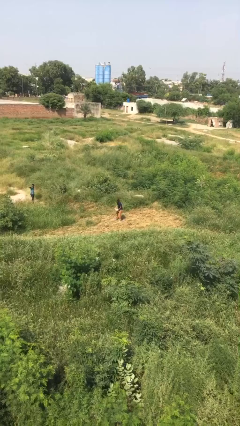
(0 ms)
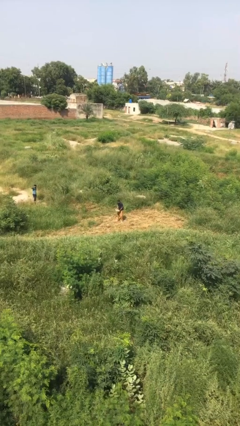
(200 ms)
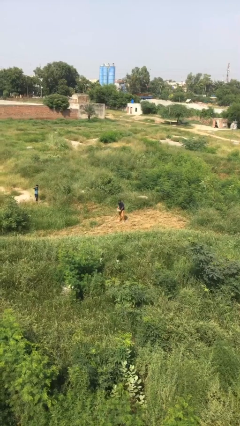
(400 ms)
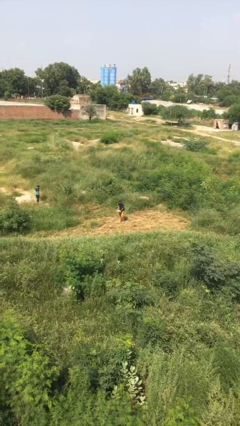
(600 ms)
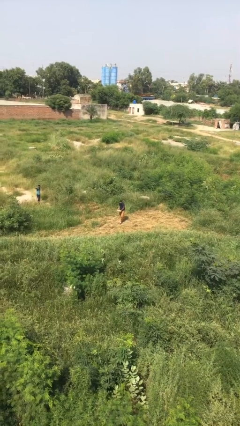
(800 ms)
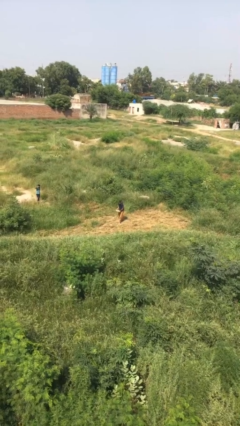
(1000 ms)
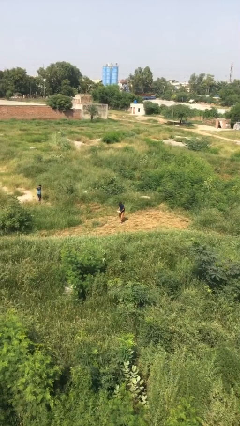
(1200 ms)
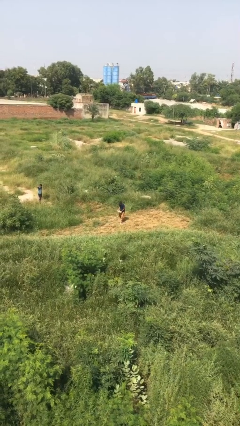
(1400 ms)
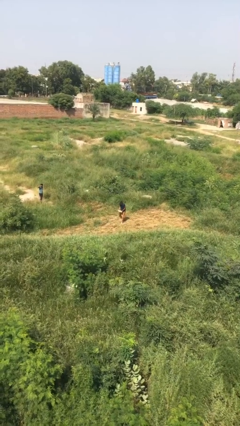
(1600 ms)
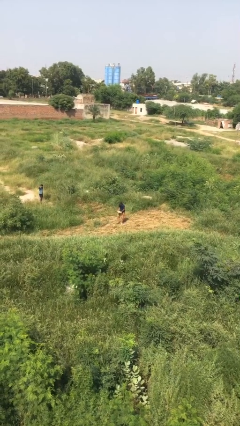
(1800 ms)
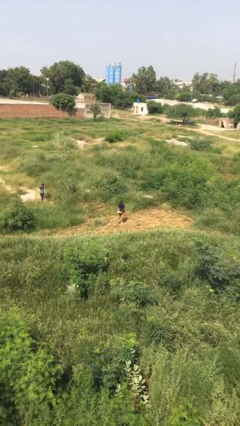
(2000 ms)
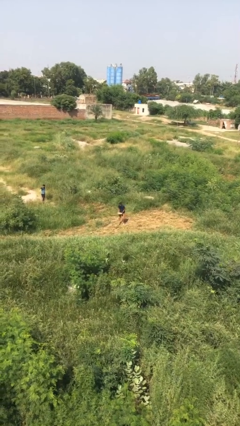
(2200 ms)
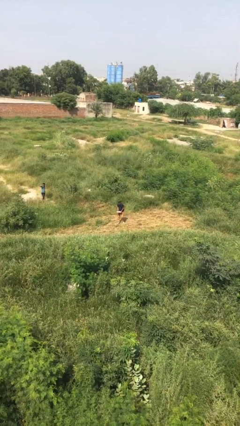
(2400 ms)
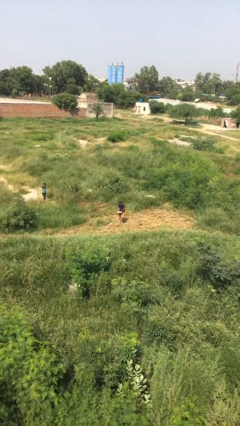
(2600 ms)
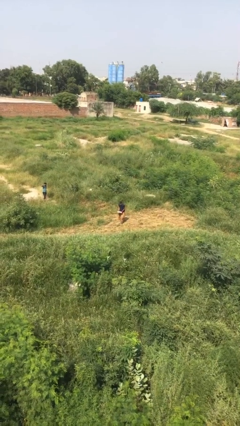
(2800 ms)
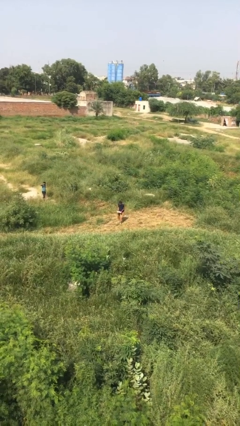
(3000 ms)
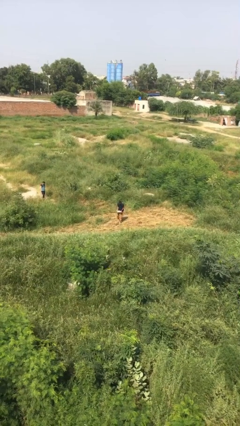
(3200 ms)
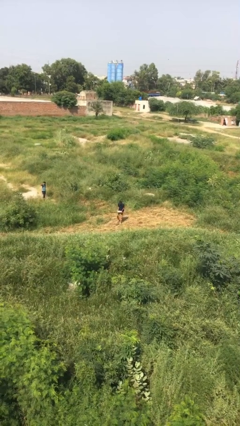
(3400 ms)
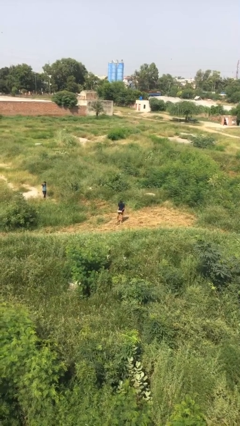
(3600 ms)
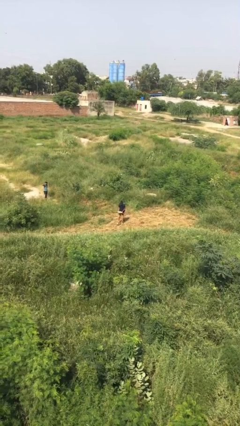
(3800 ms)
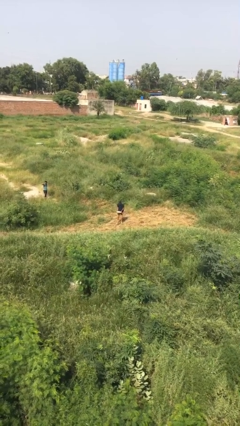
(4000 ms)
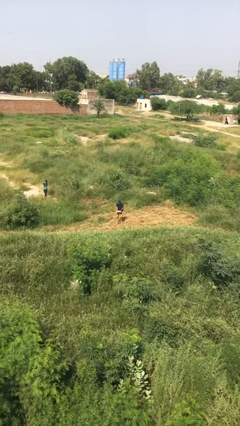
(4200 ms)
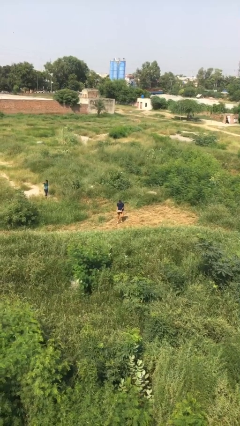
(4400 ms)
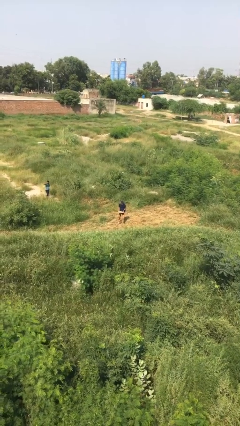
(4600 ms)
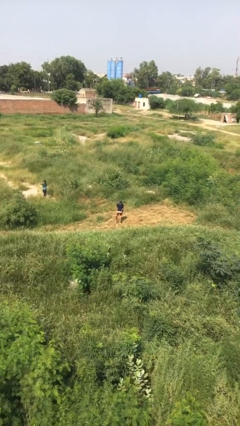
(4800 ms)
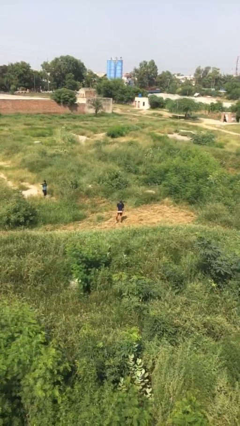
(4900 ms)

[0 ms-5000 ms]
person carries heavy object

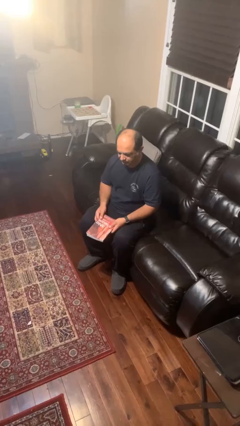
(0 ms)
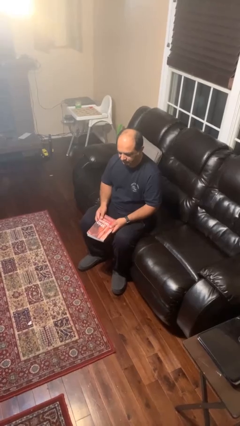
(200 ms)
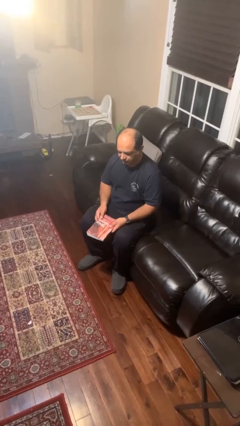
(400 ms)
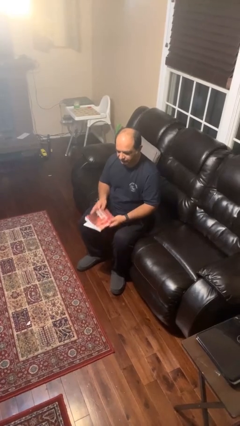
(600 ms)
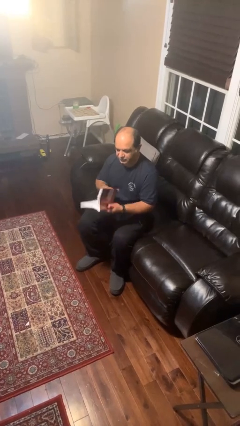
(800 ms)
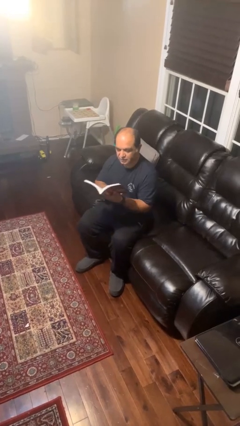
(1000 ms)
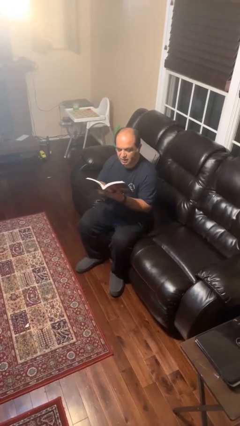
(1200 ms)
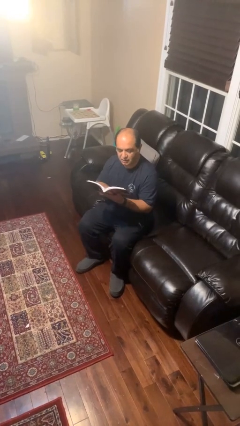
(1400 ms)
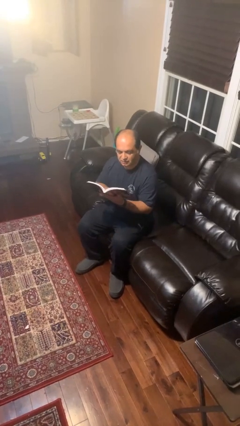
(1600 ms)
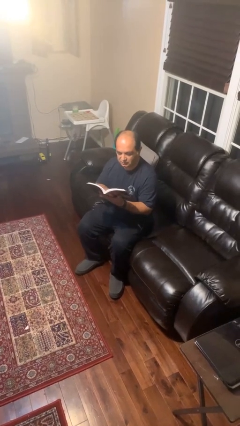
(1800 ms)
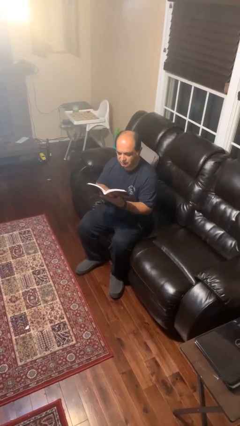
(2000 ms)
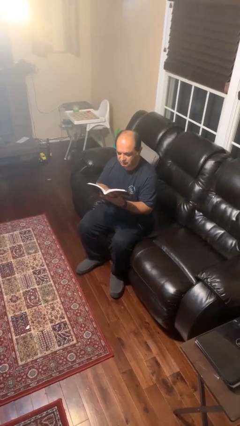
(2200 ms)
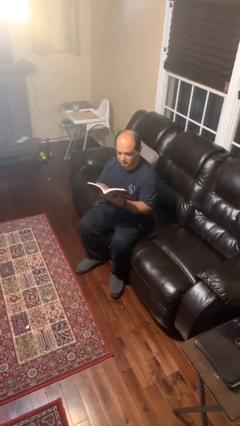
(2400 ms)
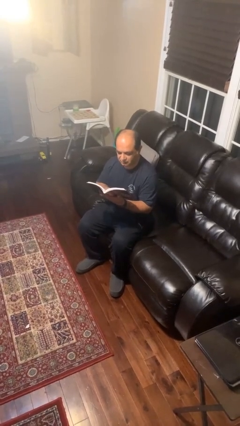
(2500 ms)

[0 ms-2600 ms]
person reads document

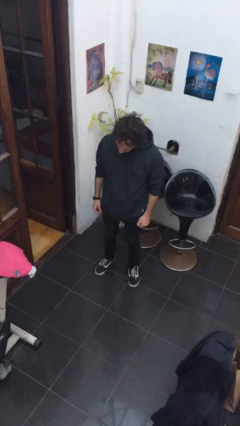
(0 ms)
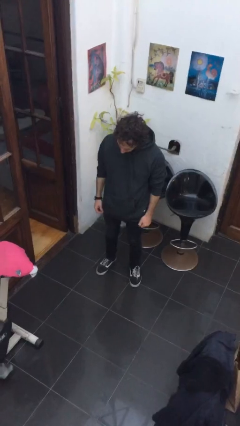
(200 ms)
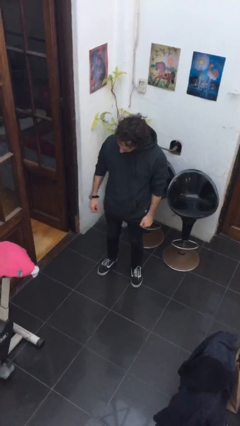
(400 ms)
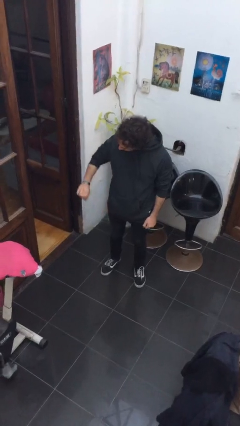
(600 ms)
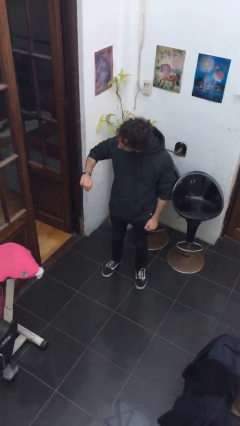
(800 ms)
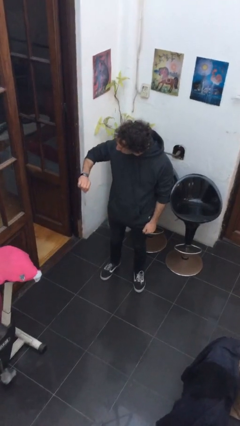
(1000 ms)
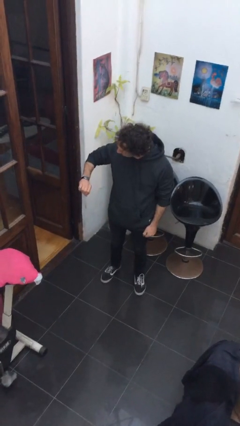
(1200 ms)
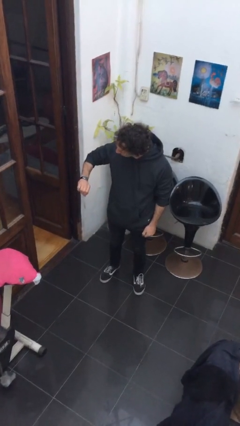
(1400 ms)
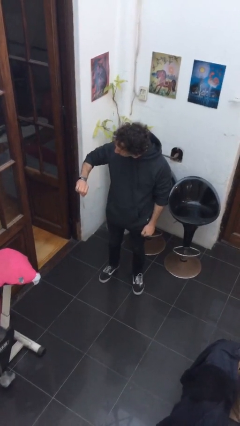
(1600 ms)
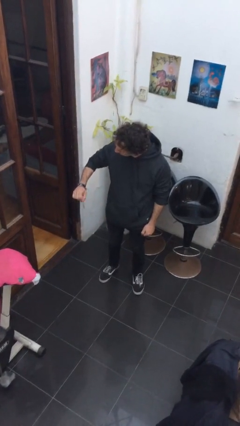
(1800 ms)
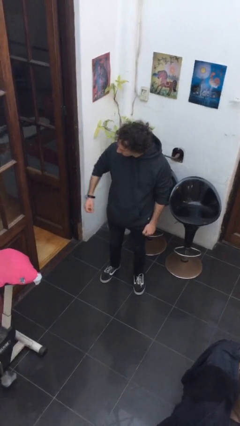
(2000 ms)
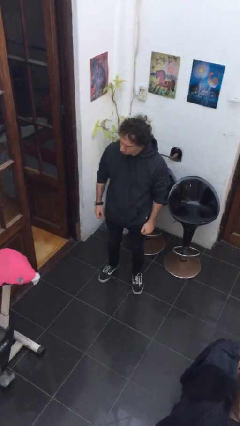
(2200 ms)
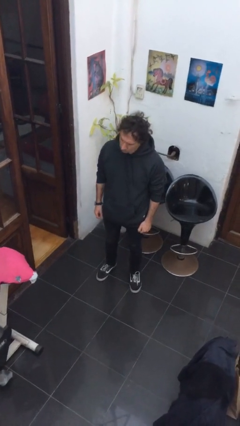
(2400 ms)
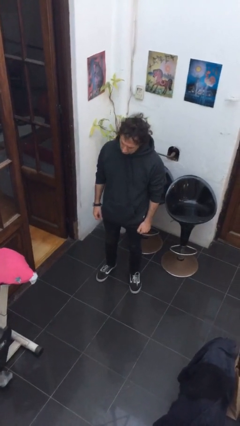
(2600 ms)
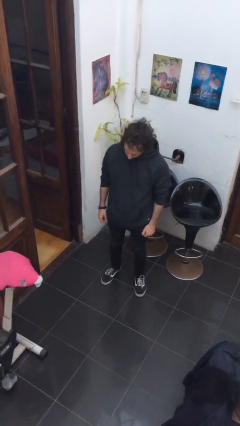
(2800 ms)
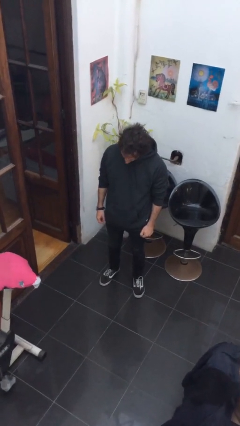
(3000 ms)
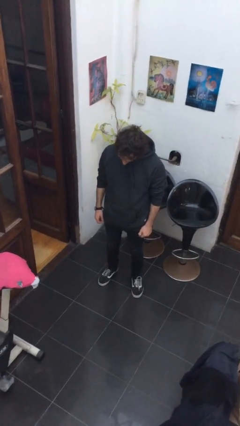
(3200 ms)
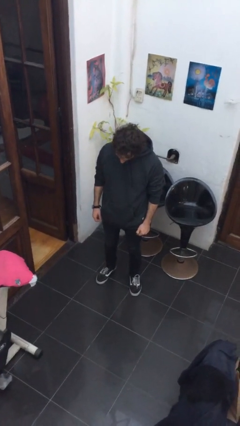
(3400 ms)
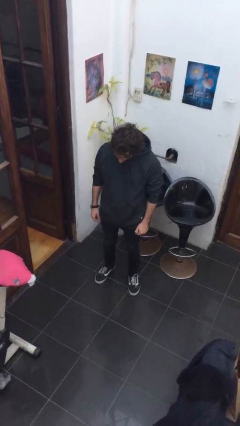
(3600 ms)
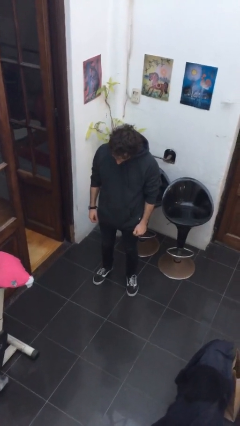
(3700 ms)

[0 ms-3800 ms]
person looks at wristwatch

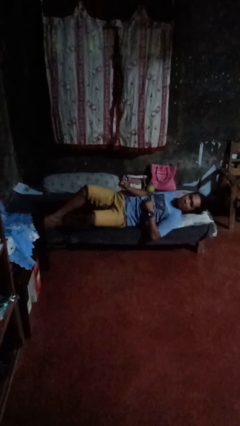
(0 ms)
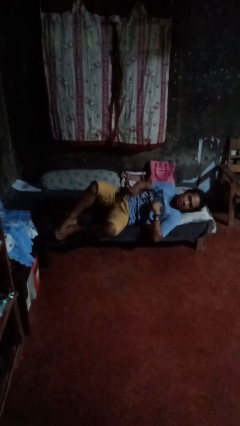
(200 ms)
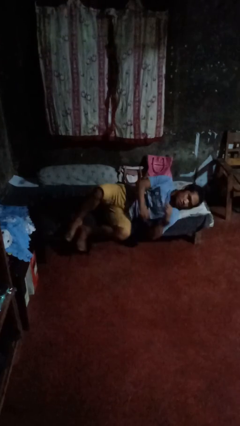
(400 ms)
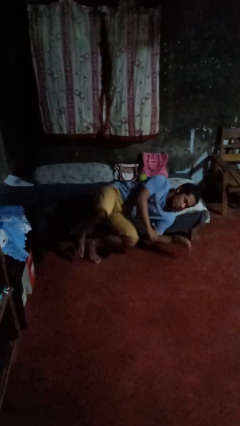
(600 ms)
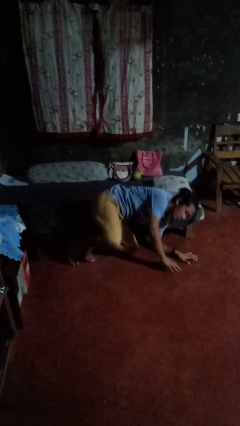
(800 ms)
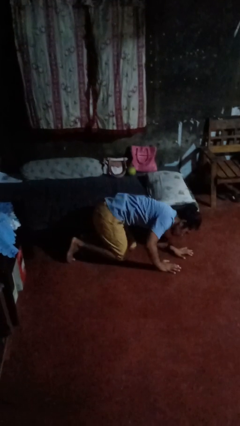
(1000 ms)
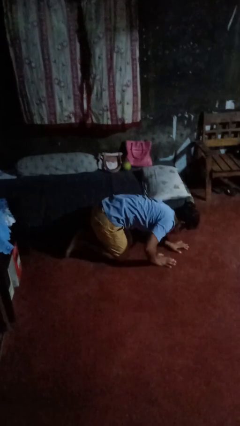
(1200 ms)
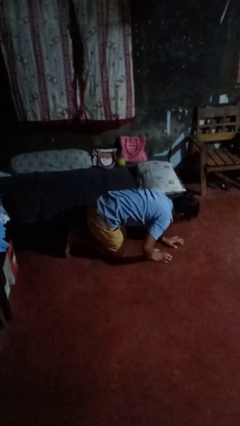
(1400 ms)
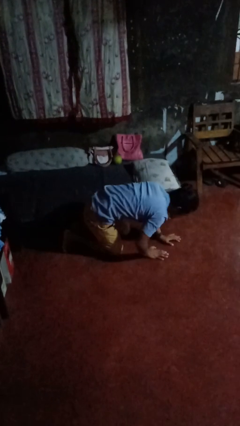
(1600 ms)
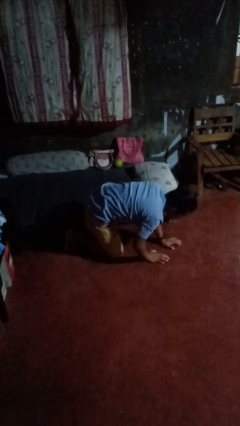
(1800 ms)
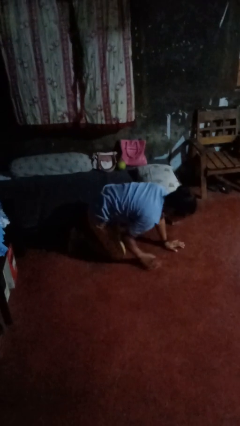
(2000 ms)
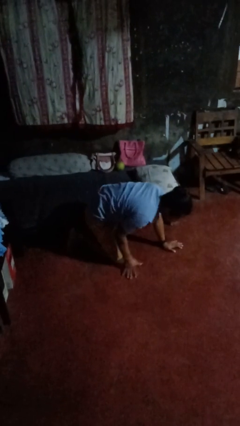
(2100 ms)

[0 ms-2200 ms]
person falls from bed

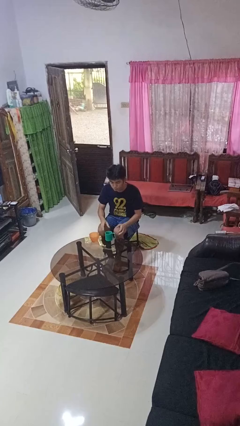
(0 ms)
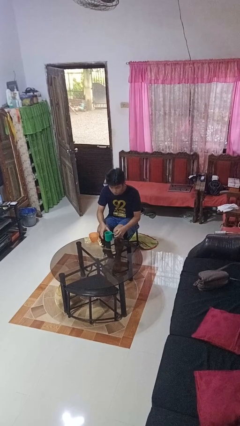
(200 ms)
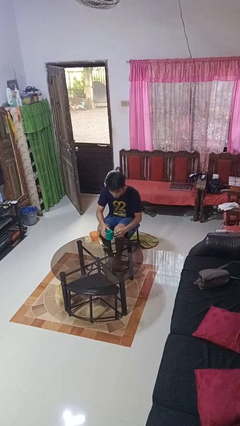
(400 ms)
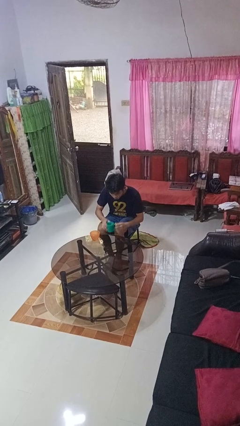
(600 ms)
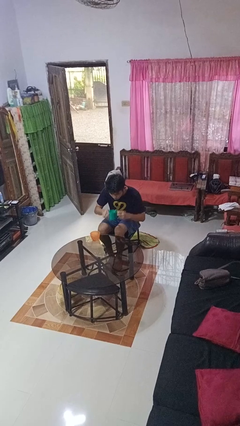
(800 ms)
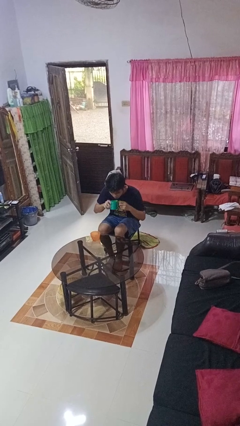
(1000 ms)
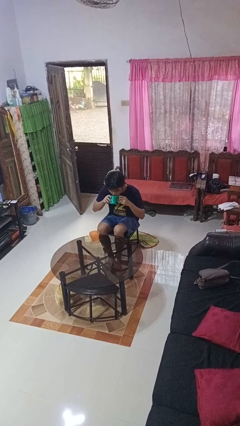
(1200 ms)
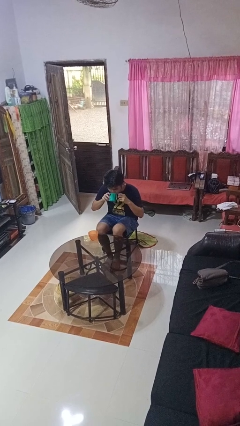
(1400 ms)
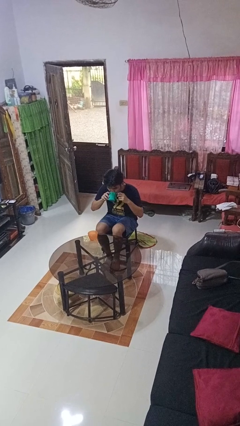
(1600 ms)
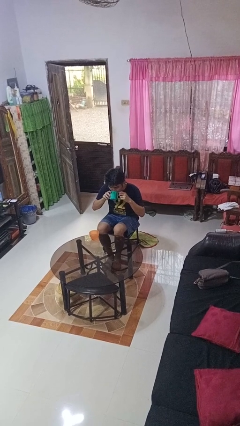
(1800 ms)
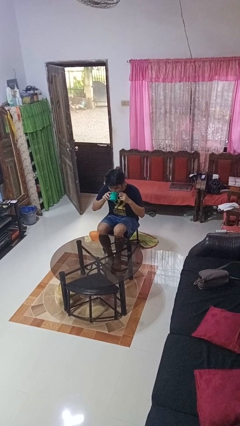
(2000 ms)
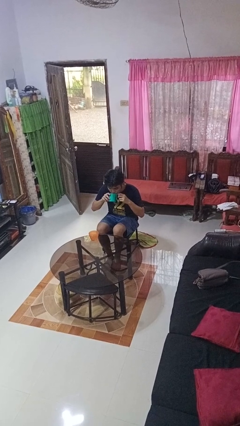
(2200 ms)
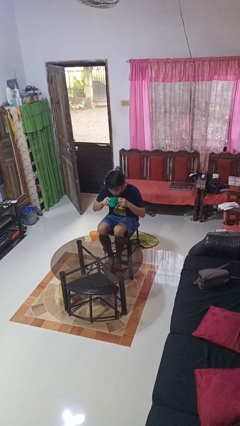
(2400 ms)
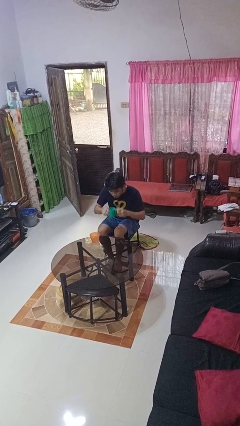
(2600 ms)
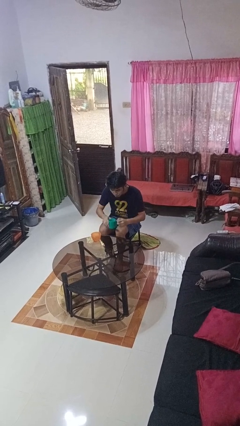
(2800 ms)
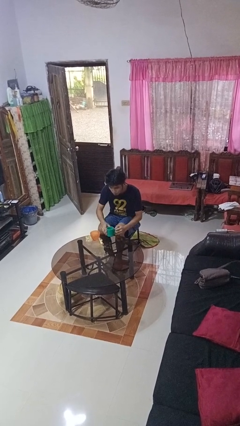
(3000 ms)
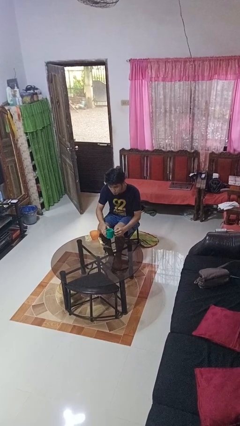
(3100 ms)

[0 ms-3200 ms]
person drinks from cup

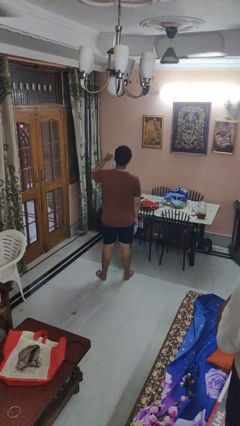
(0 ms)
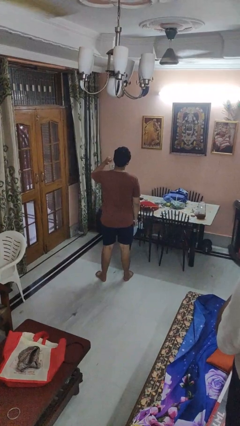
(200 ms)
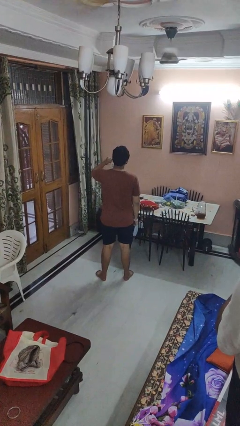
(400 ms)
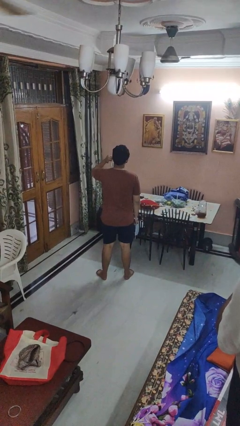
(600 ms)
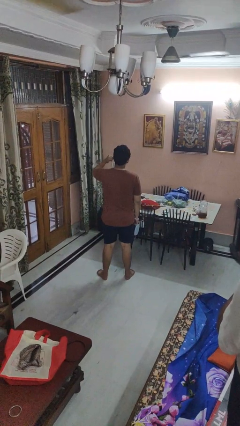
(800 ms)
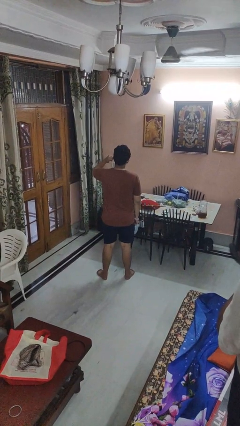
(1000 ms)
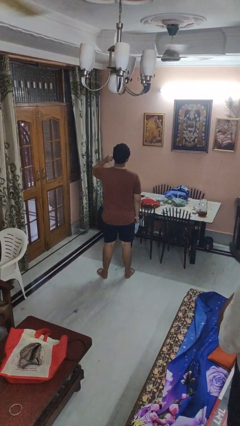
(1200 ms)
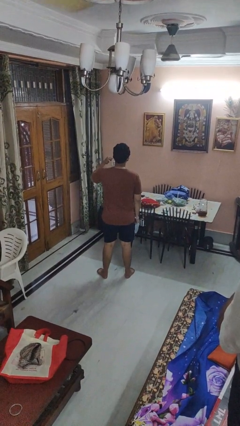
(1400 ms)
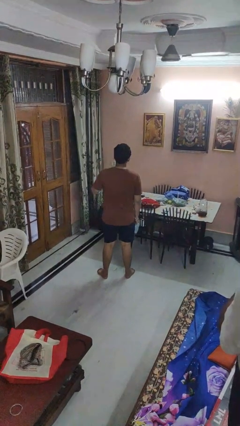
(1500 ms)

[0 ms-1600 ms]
person gestures behind me
